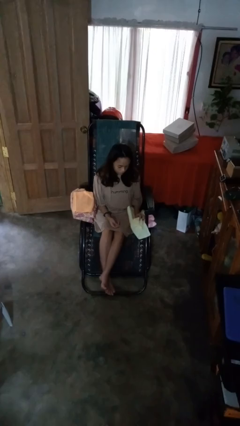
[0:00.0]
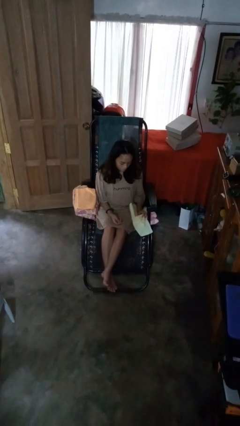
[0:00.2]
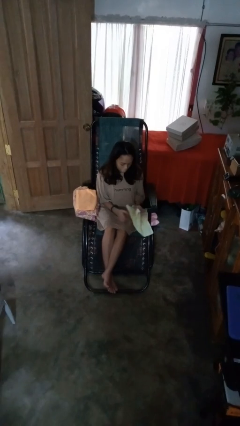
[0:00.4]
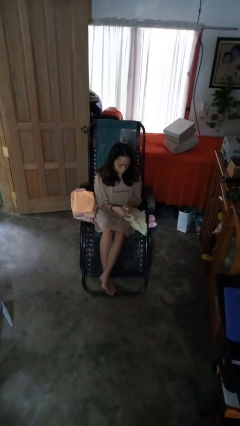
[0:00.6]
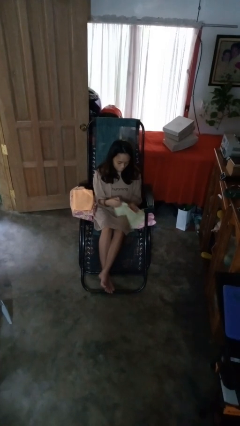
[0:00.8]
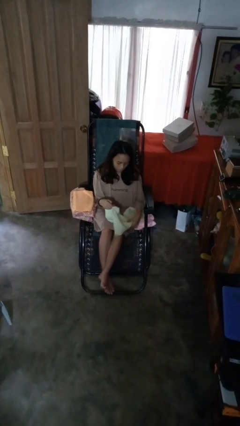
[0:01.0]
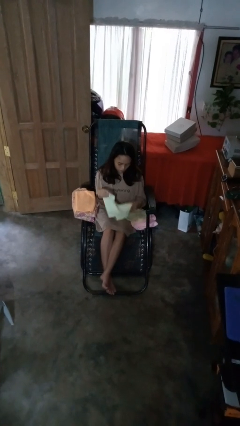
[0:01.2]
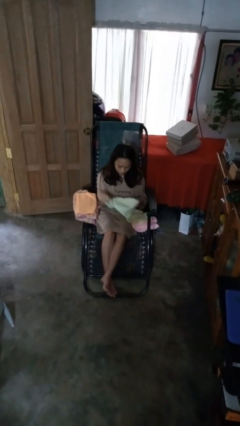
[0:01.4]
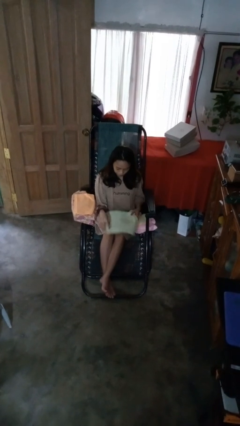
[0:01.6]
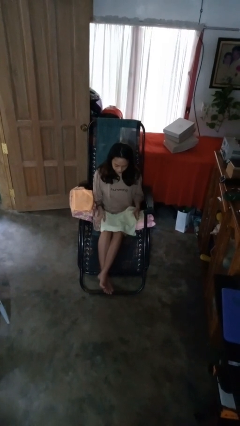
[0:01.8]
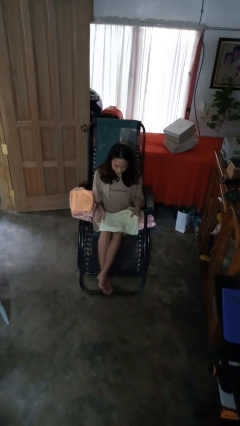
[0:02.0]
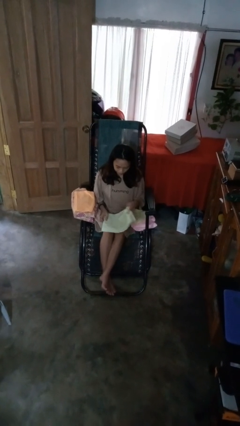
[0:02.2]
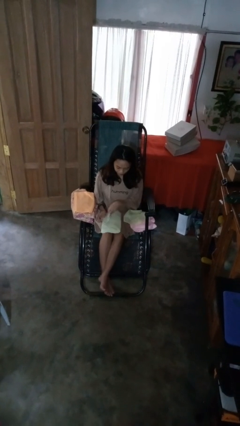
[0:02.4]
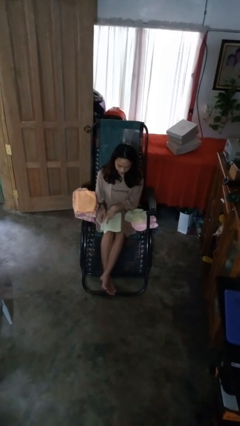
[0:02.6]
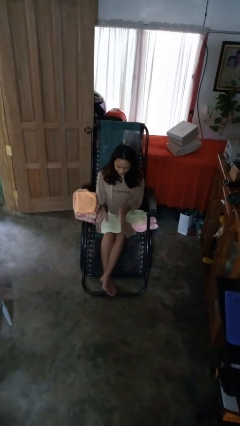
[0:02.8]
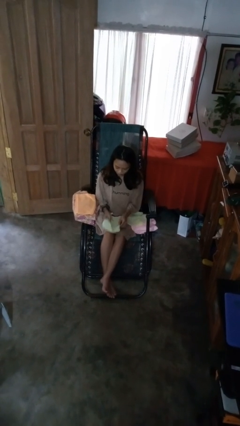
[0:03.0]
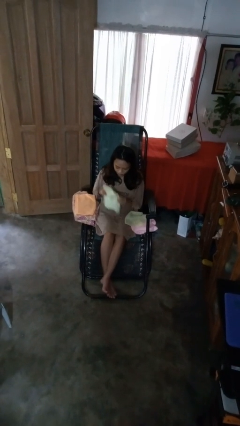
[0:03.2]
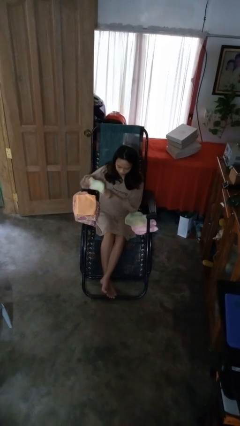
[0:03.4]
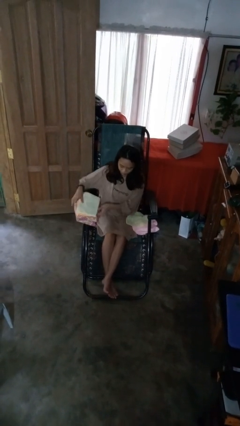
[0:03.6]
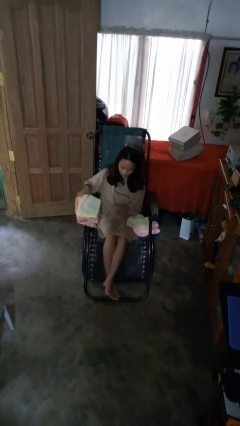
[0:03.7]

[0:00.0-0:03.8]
person folds towel

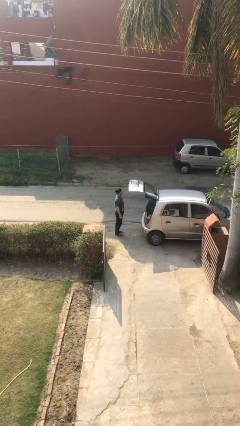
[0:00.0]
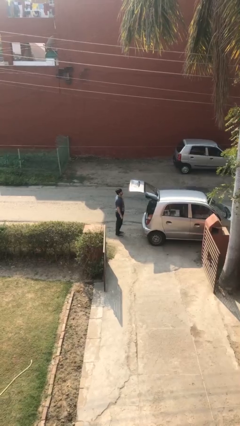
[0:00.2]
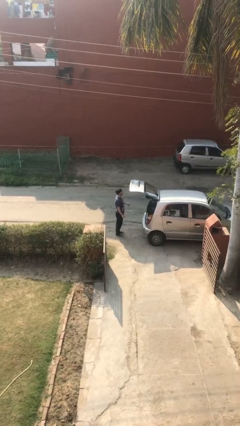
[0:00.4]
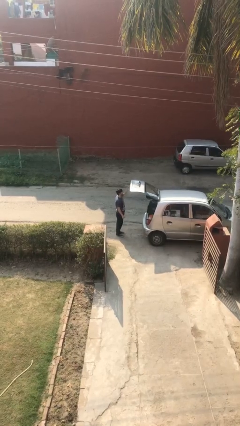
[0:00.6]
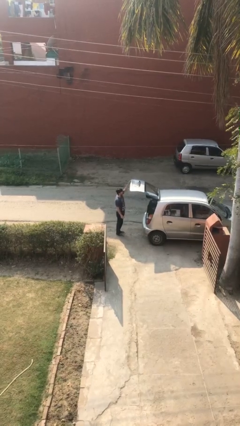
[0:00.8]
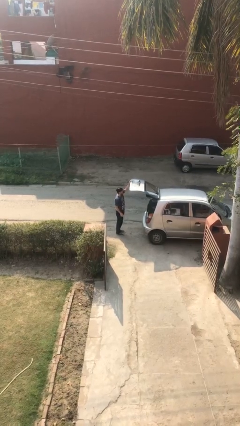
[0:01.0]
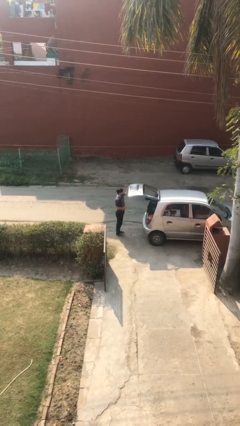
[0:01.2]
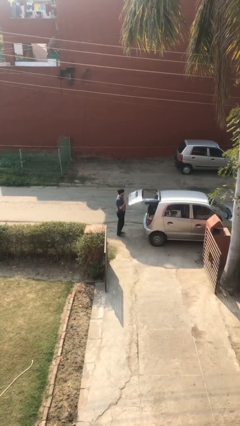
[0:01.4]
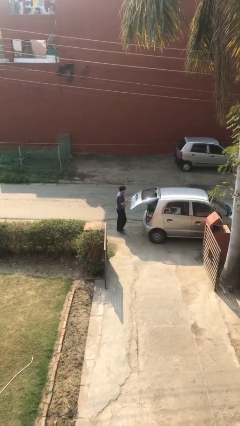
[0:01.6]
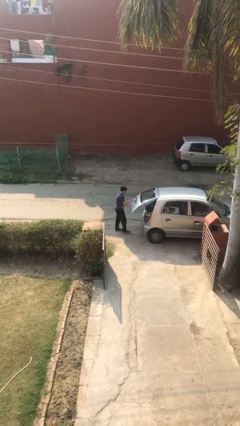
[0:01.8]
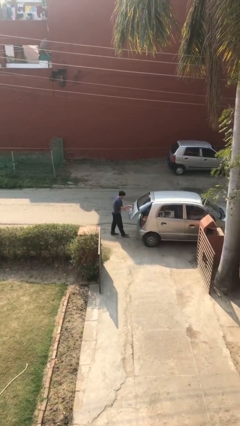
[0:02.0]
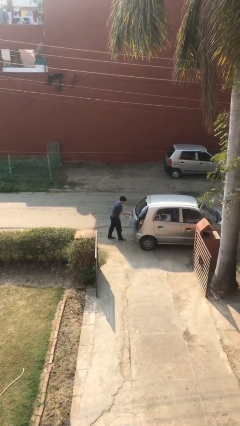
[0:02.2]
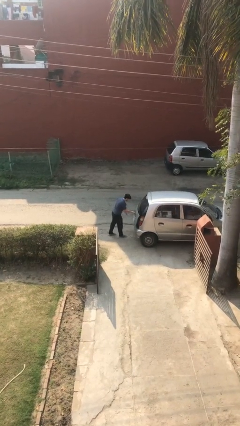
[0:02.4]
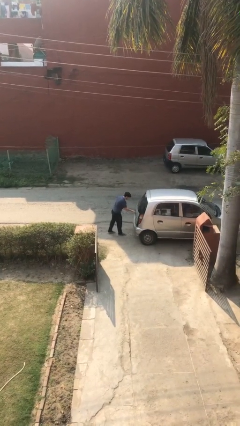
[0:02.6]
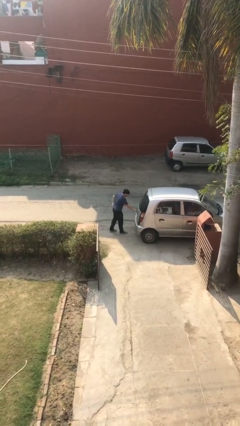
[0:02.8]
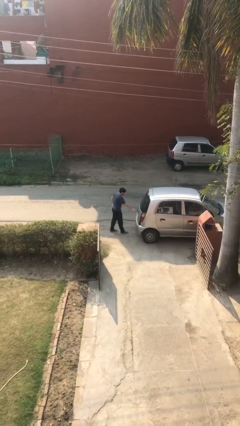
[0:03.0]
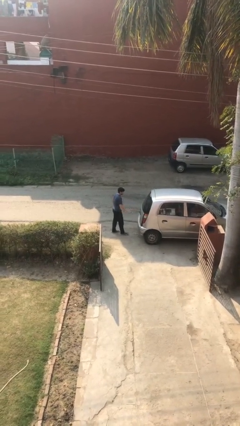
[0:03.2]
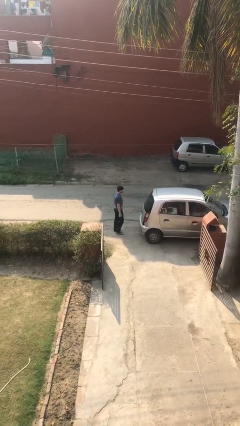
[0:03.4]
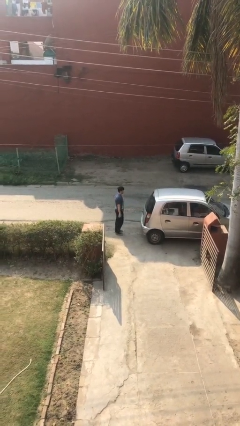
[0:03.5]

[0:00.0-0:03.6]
person closes car trunk

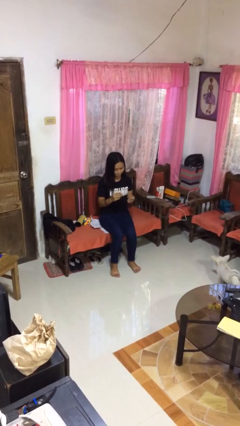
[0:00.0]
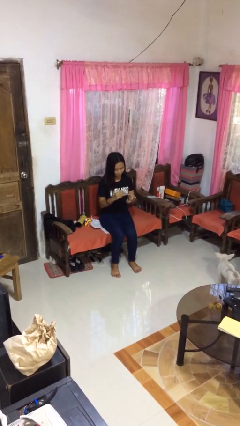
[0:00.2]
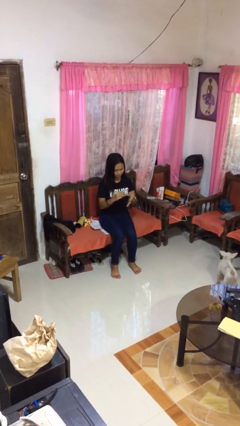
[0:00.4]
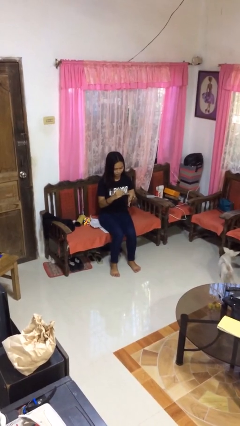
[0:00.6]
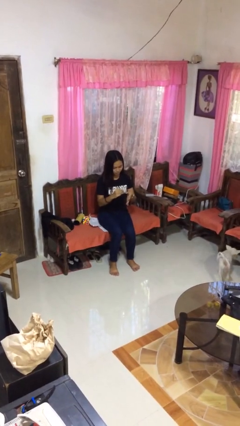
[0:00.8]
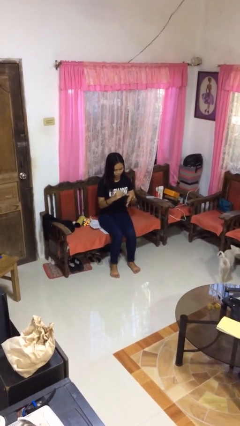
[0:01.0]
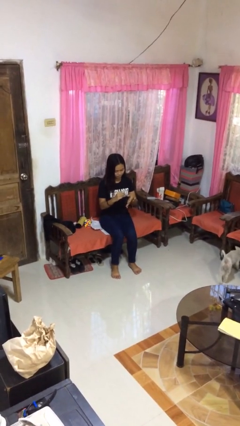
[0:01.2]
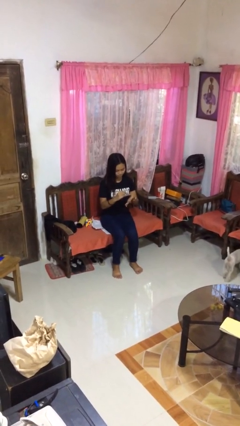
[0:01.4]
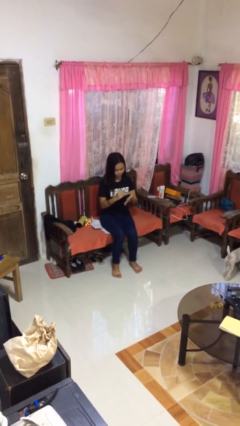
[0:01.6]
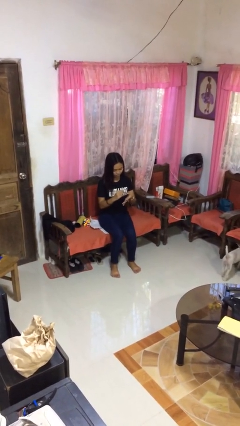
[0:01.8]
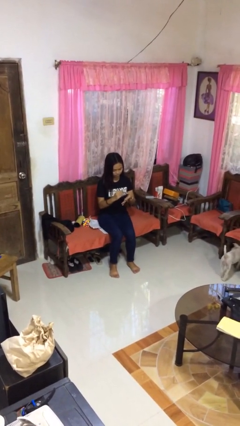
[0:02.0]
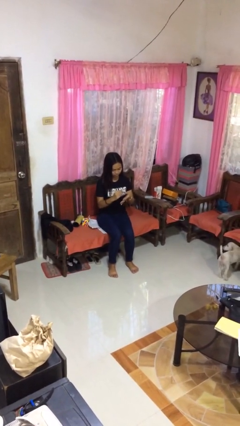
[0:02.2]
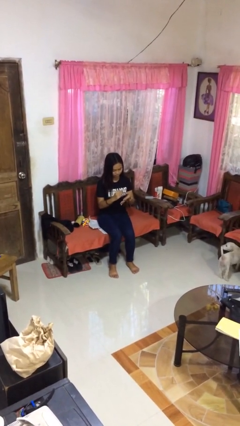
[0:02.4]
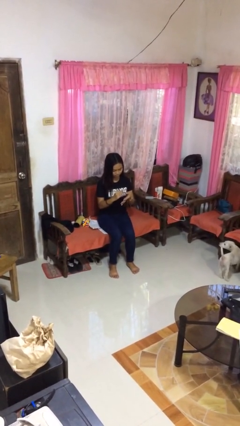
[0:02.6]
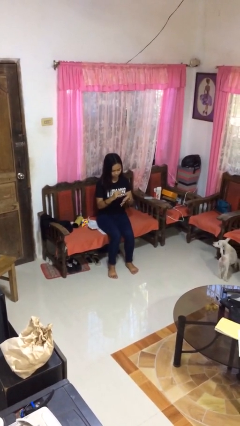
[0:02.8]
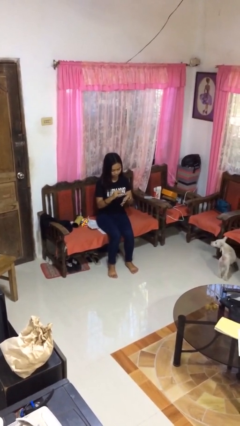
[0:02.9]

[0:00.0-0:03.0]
person clips fingernails

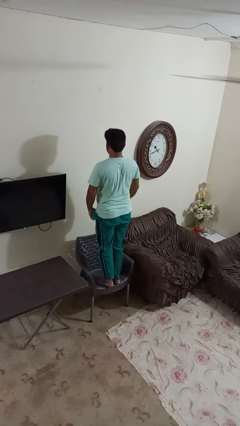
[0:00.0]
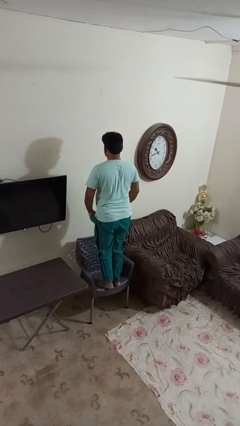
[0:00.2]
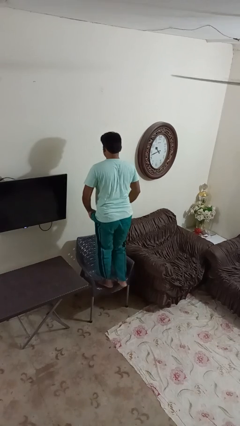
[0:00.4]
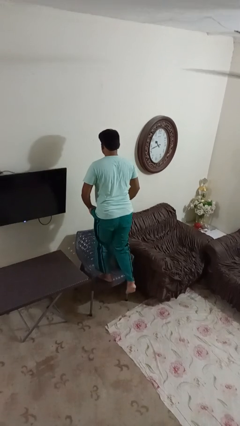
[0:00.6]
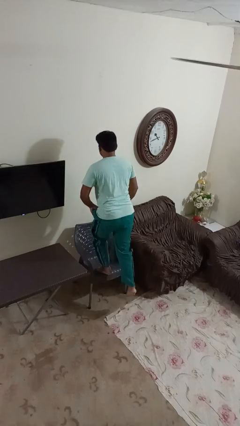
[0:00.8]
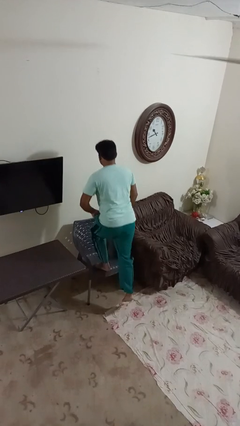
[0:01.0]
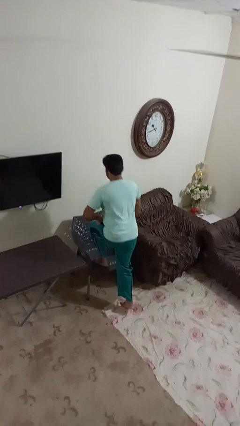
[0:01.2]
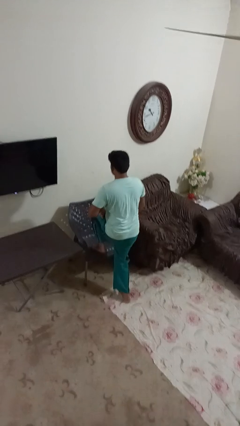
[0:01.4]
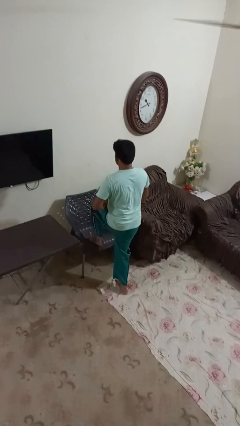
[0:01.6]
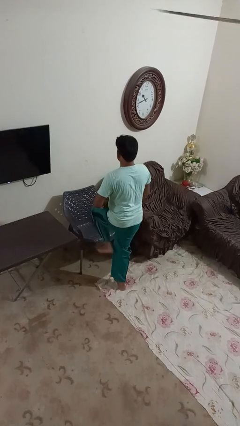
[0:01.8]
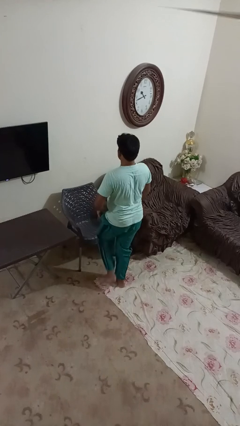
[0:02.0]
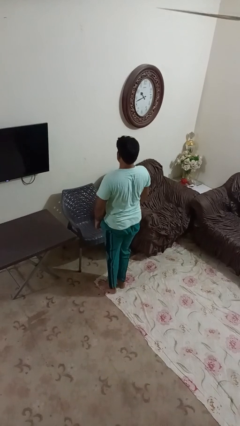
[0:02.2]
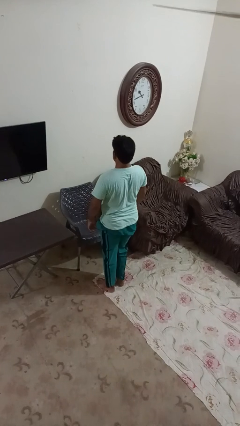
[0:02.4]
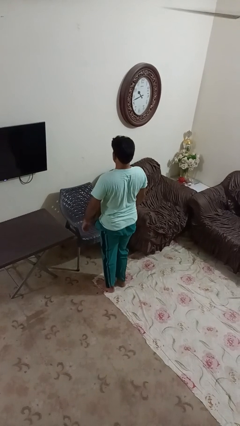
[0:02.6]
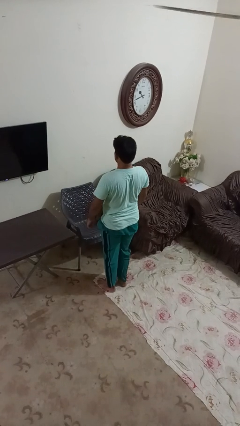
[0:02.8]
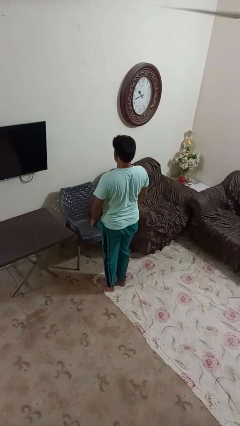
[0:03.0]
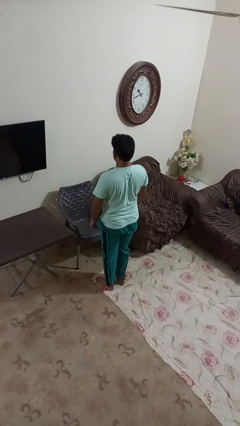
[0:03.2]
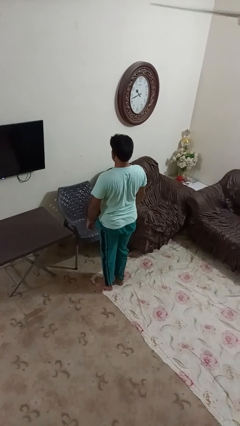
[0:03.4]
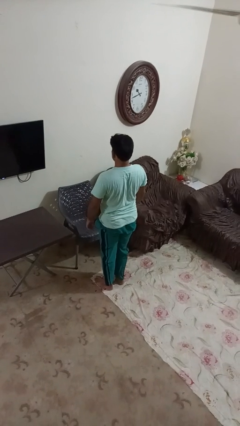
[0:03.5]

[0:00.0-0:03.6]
person climbs off chair

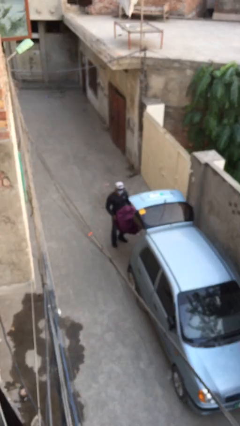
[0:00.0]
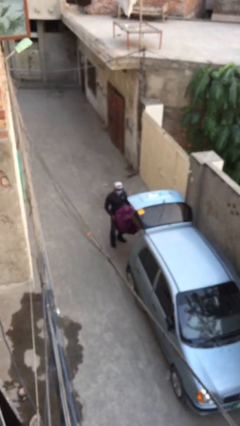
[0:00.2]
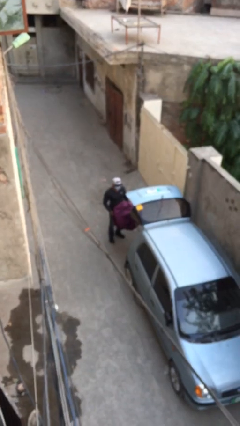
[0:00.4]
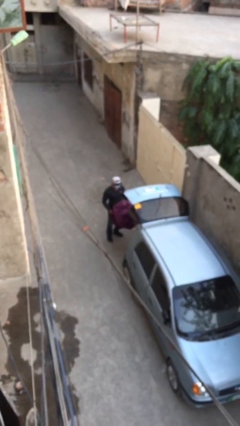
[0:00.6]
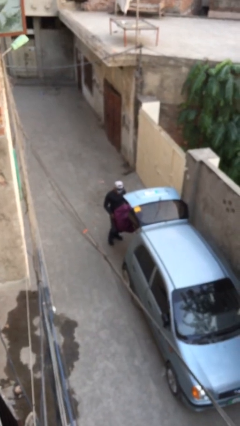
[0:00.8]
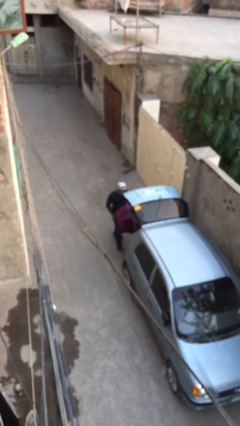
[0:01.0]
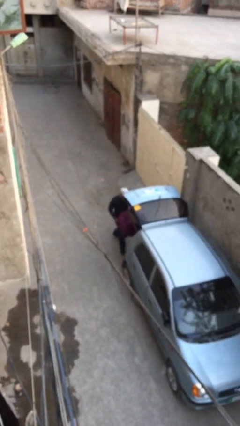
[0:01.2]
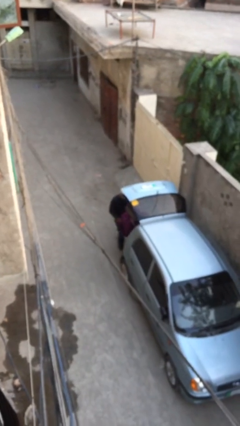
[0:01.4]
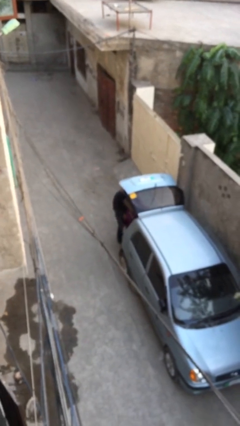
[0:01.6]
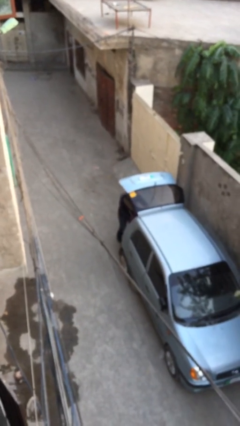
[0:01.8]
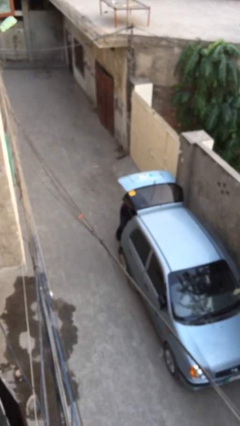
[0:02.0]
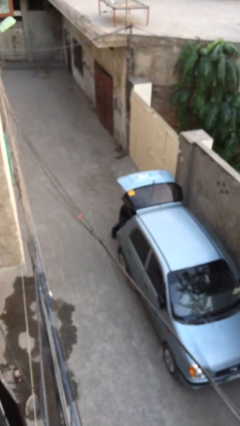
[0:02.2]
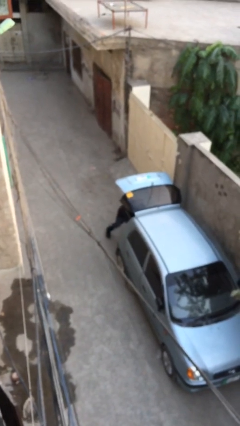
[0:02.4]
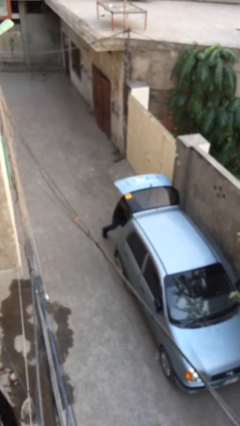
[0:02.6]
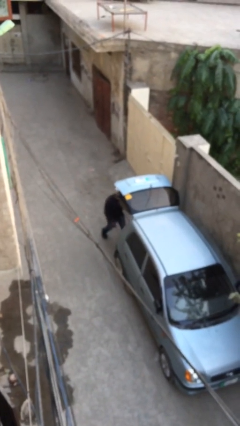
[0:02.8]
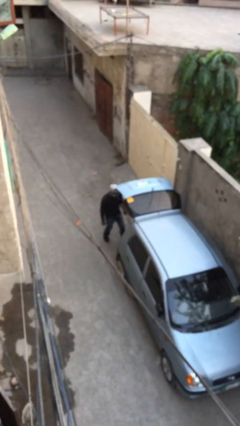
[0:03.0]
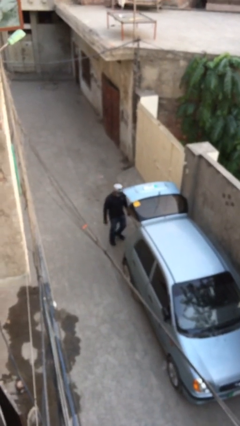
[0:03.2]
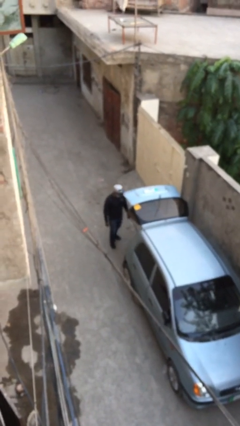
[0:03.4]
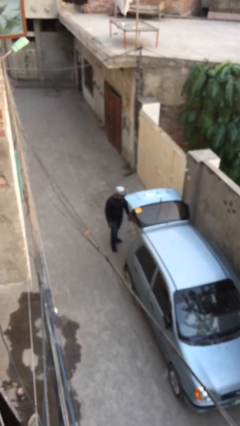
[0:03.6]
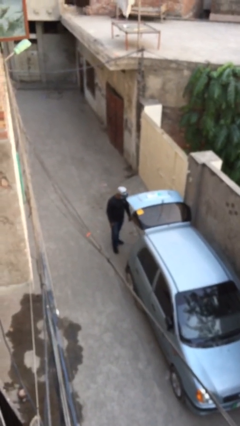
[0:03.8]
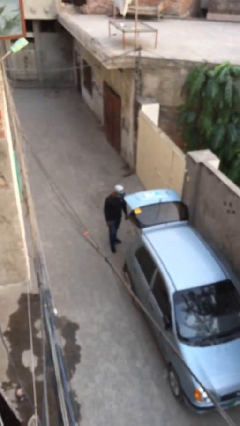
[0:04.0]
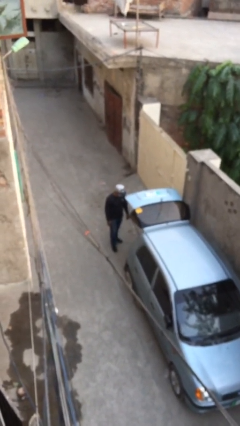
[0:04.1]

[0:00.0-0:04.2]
person loads car
